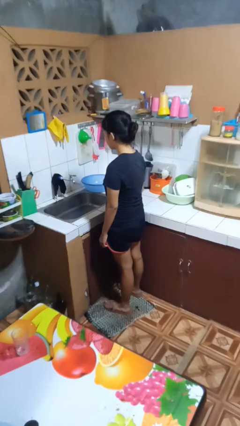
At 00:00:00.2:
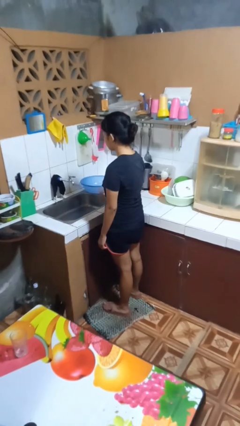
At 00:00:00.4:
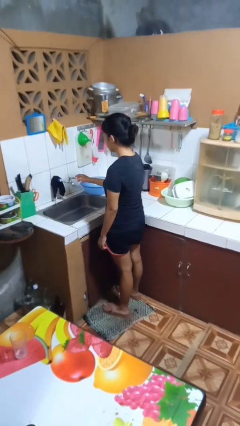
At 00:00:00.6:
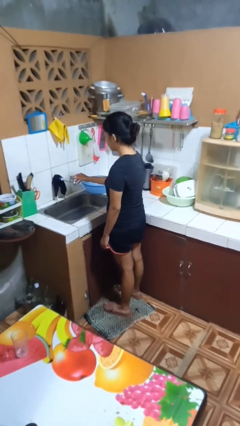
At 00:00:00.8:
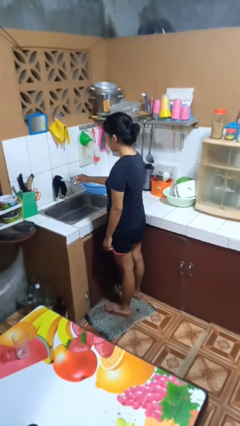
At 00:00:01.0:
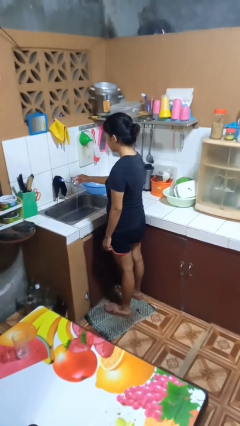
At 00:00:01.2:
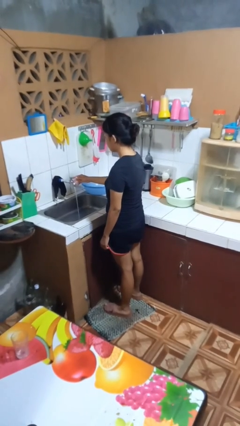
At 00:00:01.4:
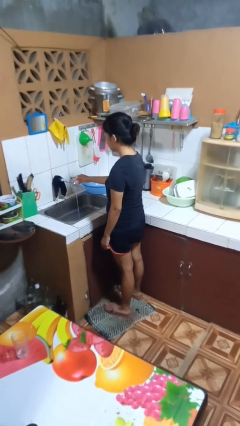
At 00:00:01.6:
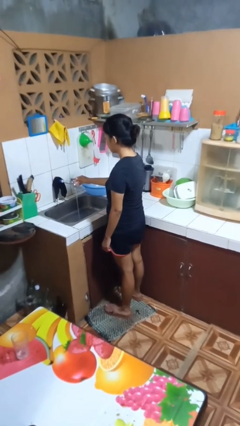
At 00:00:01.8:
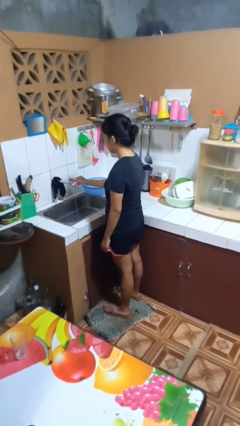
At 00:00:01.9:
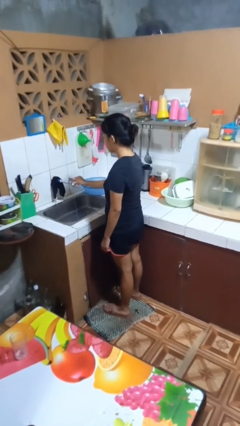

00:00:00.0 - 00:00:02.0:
person turns on faucet

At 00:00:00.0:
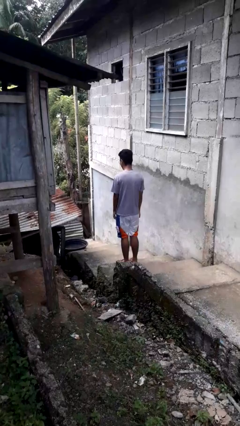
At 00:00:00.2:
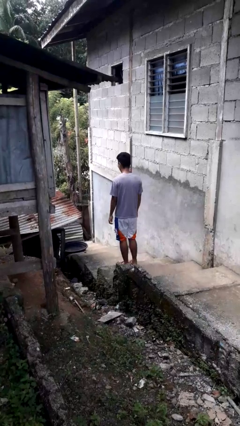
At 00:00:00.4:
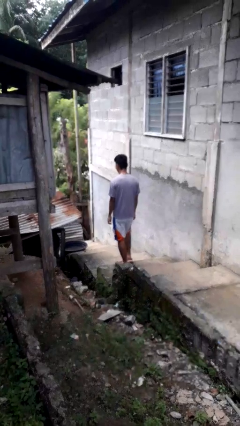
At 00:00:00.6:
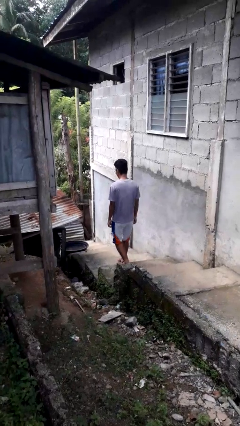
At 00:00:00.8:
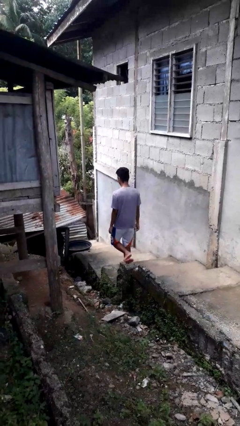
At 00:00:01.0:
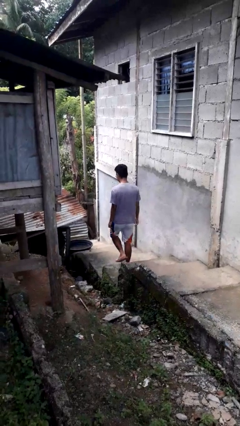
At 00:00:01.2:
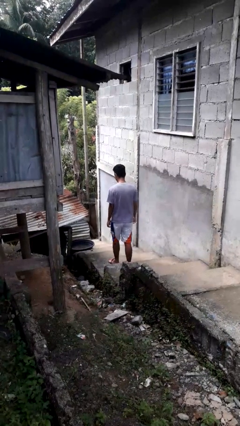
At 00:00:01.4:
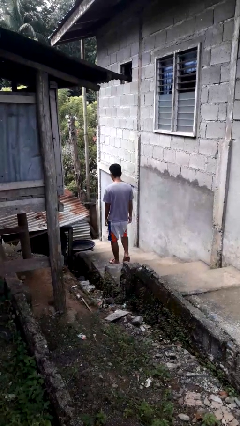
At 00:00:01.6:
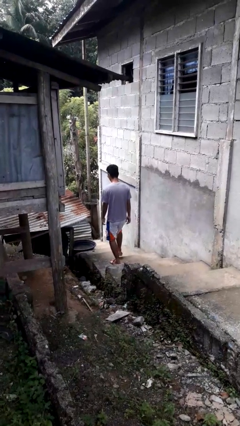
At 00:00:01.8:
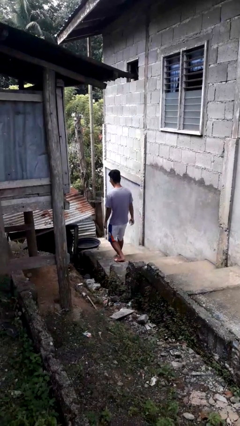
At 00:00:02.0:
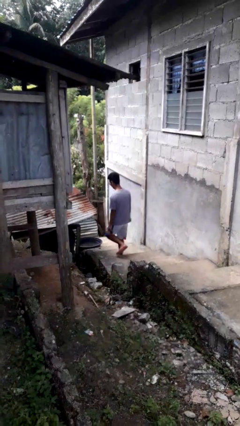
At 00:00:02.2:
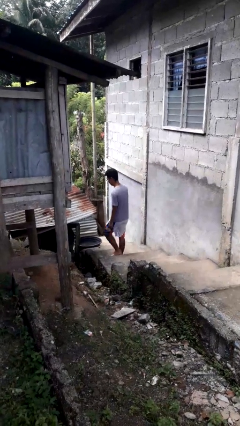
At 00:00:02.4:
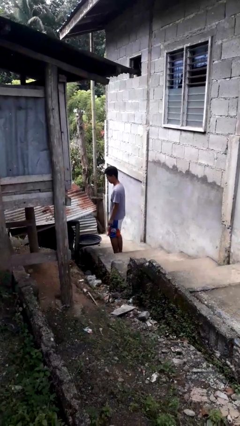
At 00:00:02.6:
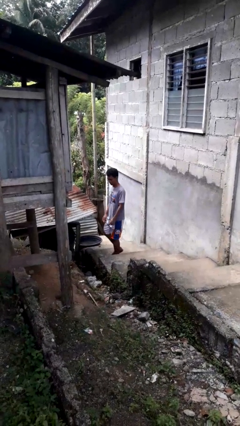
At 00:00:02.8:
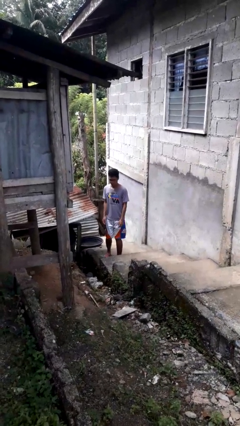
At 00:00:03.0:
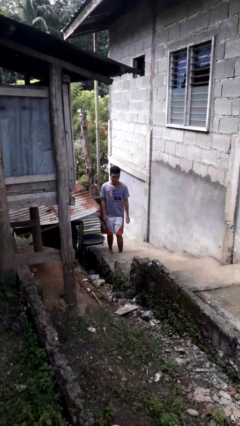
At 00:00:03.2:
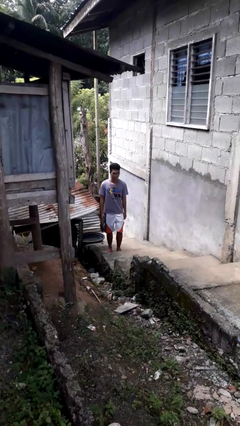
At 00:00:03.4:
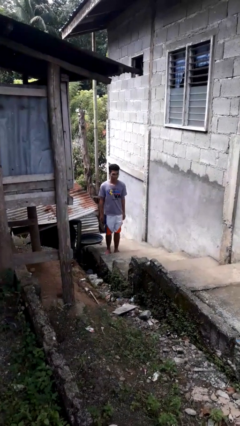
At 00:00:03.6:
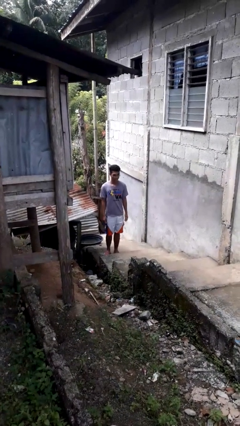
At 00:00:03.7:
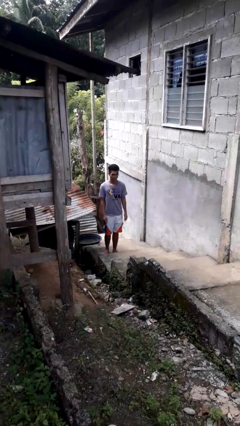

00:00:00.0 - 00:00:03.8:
person climbs down stairs

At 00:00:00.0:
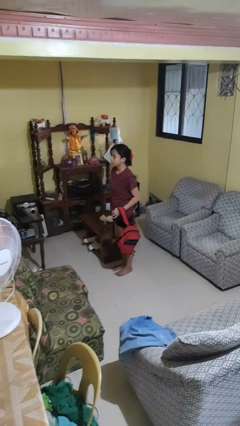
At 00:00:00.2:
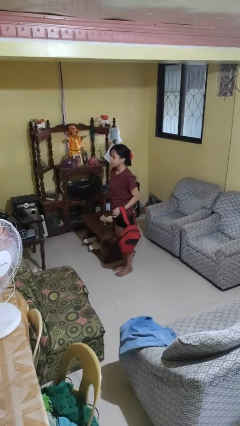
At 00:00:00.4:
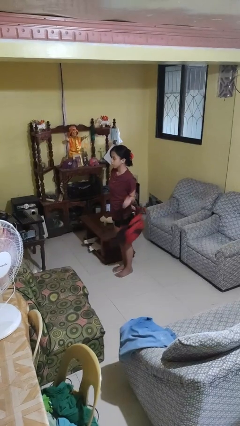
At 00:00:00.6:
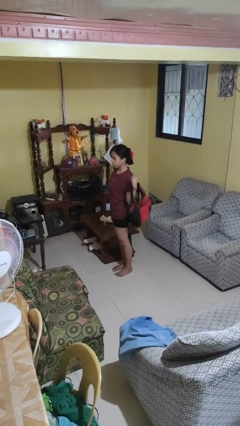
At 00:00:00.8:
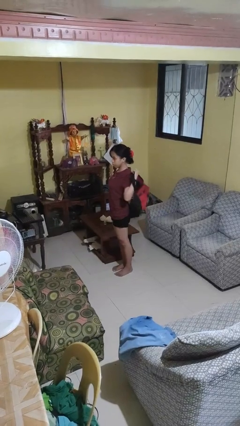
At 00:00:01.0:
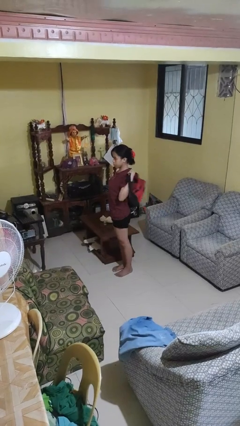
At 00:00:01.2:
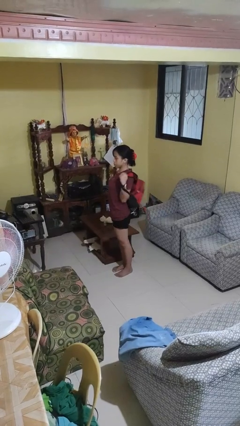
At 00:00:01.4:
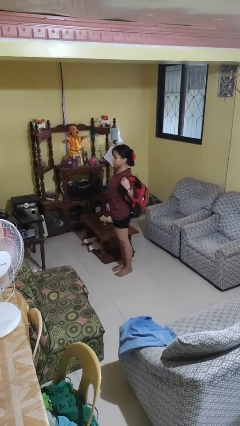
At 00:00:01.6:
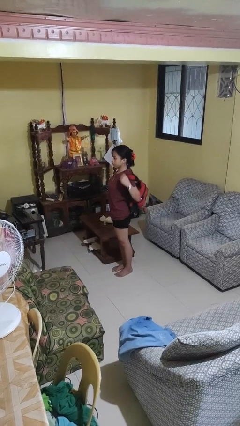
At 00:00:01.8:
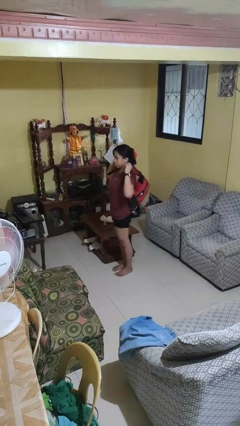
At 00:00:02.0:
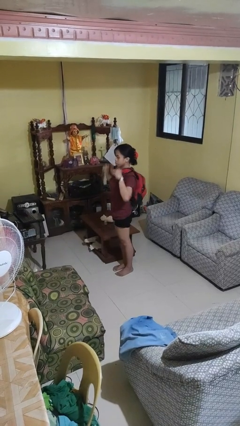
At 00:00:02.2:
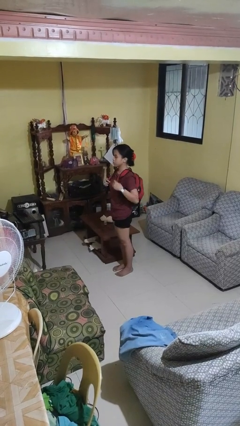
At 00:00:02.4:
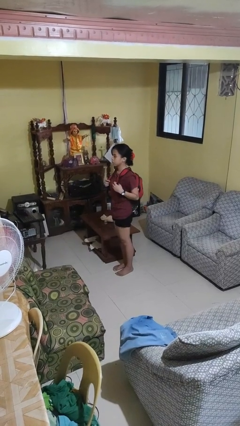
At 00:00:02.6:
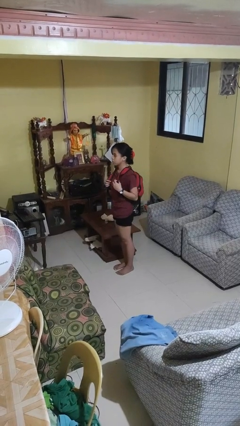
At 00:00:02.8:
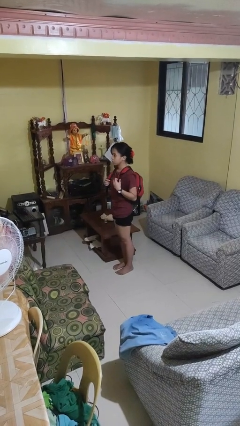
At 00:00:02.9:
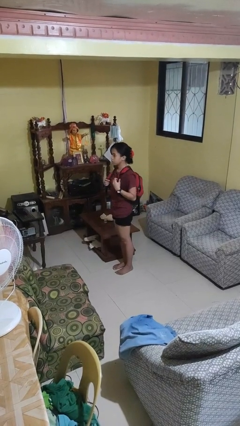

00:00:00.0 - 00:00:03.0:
person puts on backpack

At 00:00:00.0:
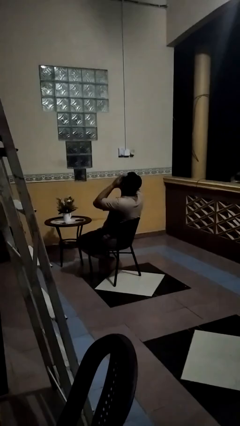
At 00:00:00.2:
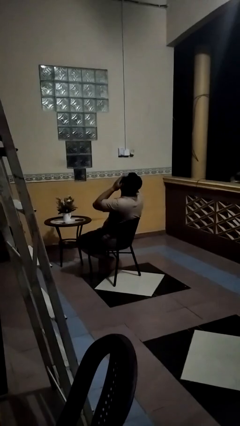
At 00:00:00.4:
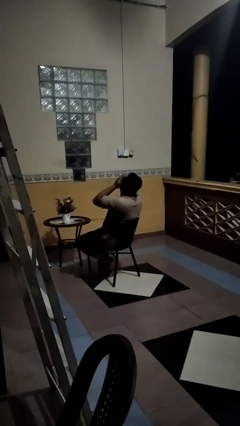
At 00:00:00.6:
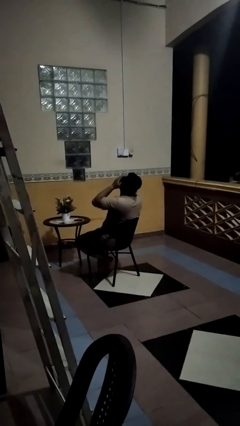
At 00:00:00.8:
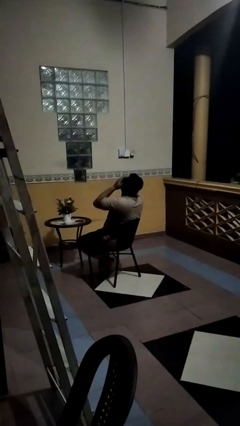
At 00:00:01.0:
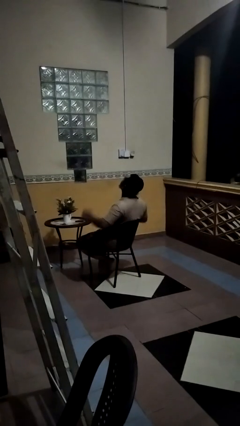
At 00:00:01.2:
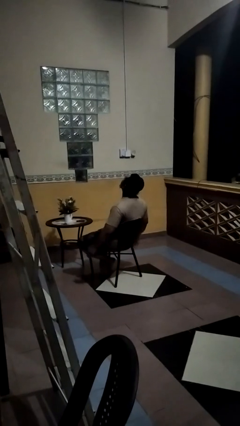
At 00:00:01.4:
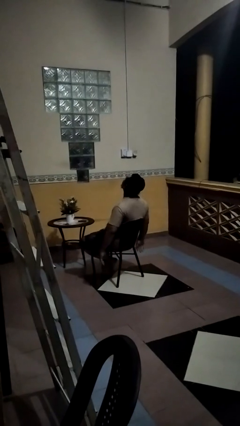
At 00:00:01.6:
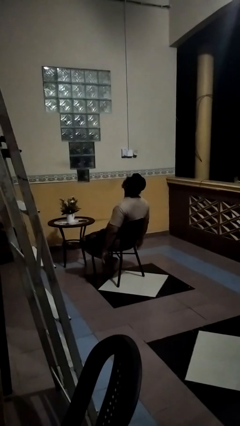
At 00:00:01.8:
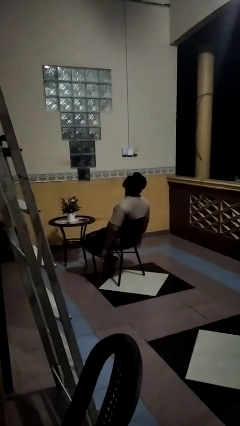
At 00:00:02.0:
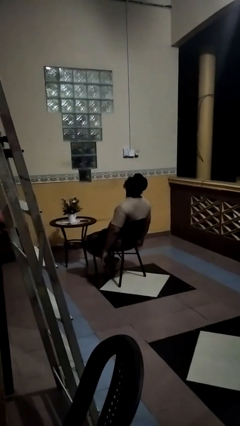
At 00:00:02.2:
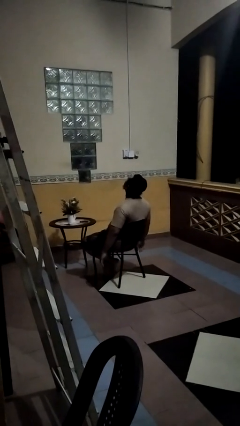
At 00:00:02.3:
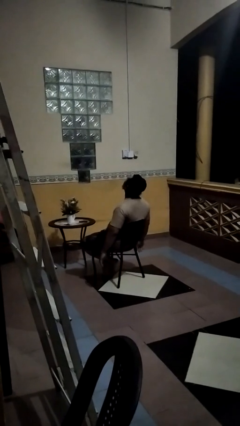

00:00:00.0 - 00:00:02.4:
person covers face with hands

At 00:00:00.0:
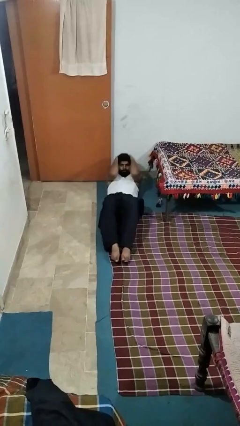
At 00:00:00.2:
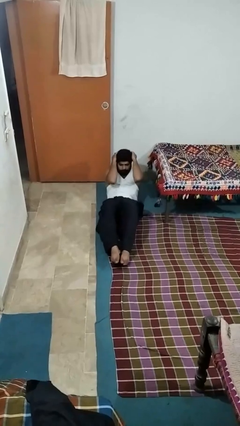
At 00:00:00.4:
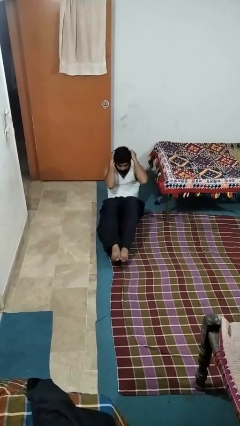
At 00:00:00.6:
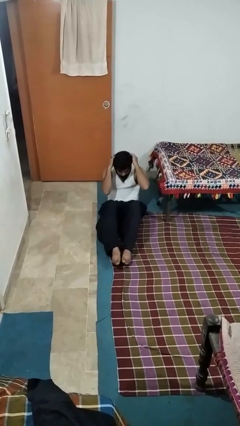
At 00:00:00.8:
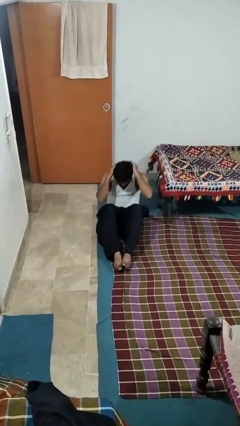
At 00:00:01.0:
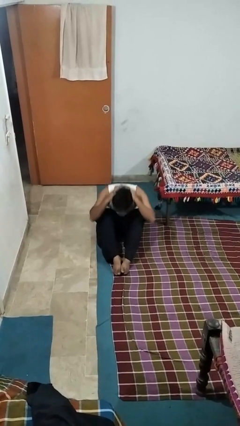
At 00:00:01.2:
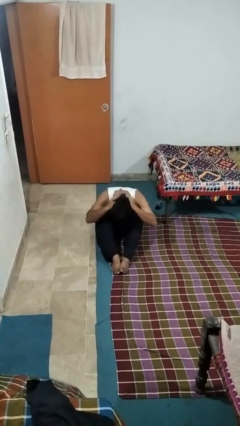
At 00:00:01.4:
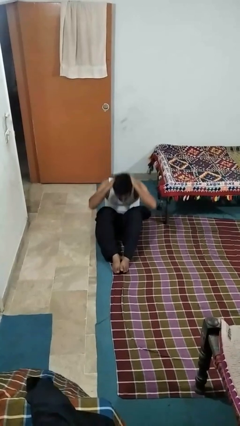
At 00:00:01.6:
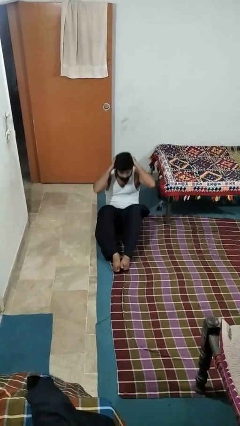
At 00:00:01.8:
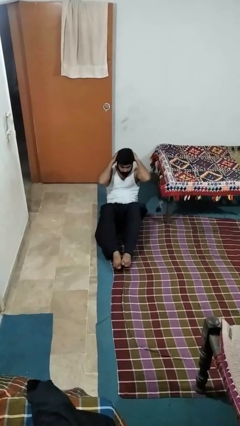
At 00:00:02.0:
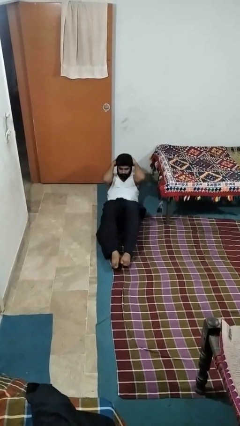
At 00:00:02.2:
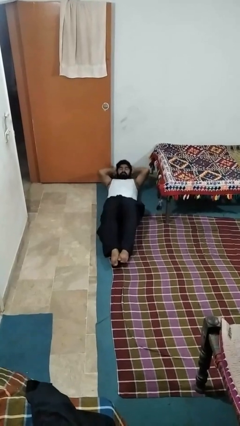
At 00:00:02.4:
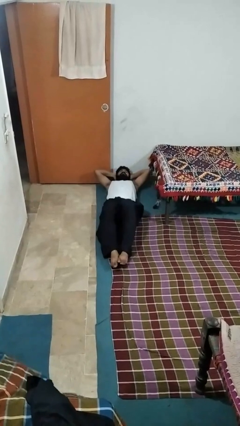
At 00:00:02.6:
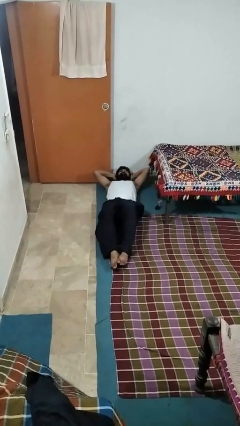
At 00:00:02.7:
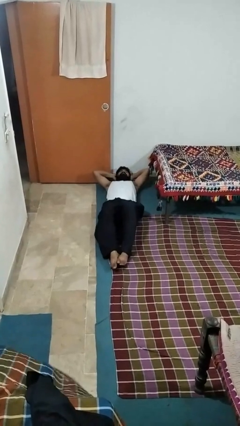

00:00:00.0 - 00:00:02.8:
person exercises with situp

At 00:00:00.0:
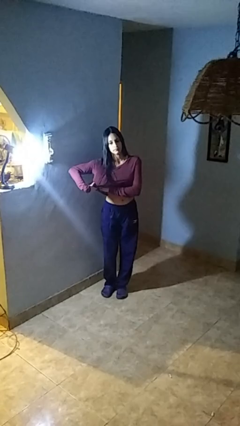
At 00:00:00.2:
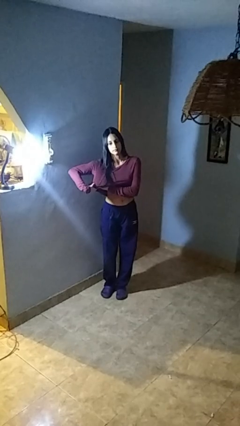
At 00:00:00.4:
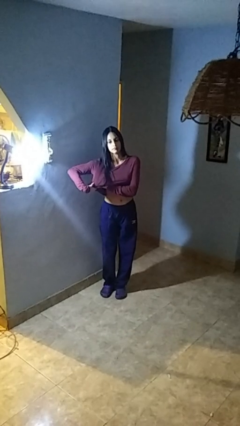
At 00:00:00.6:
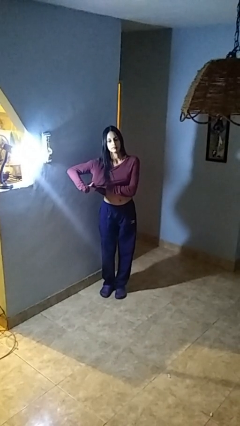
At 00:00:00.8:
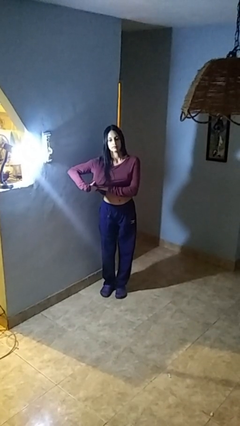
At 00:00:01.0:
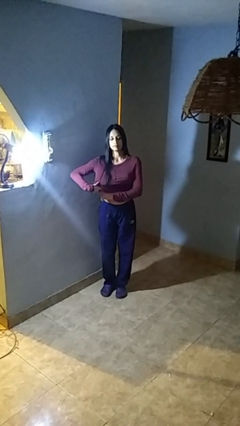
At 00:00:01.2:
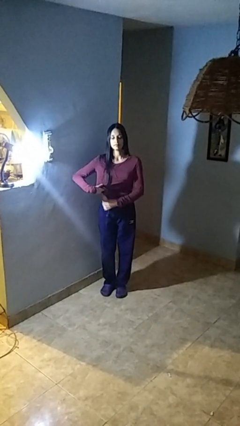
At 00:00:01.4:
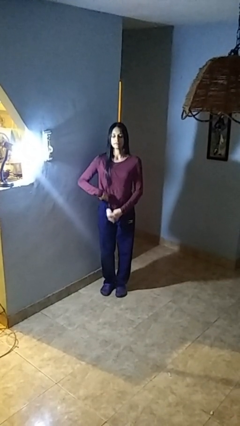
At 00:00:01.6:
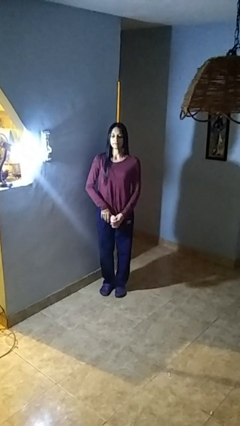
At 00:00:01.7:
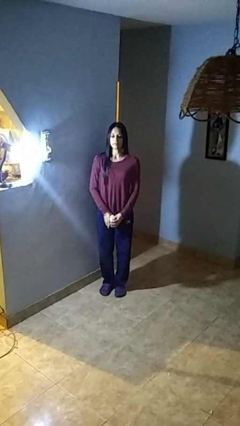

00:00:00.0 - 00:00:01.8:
person applies deodorant

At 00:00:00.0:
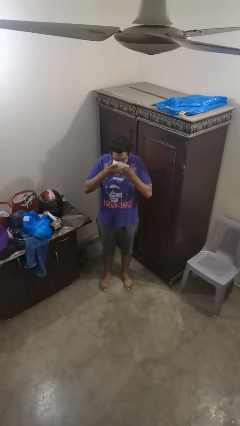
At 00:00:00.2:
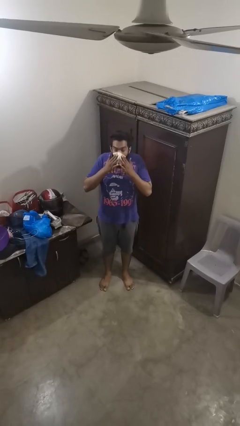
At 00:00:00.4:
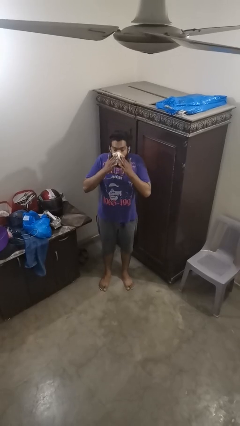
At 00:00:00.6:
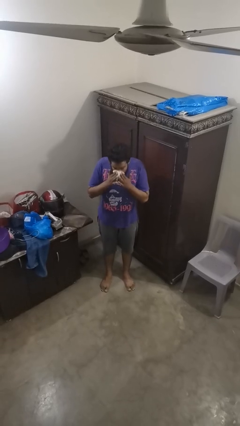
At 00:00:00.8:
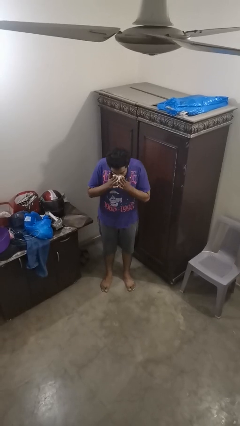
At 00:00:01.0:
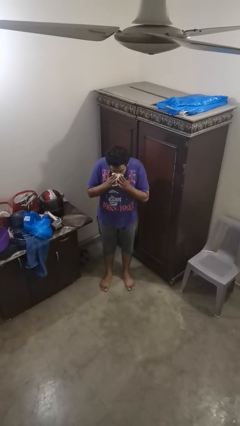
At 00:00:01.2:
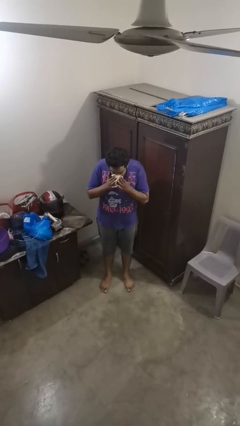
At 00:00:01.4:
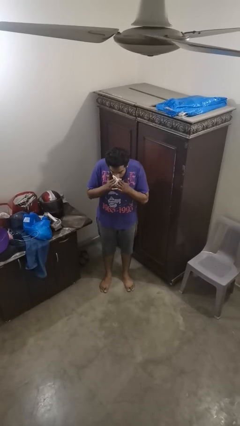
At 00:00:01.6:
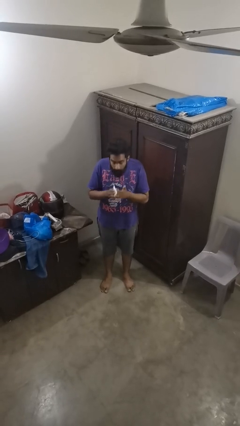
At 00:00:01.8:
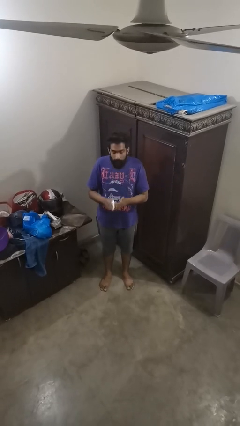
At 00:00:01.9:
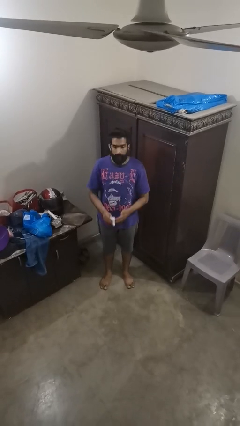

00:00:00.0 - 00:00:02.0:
person blows nose
